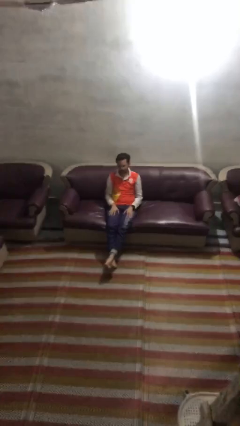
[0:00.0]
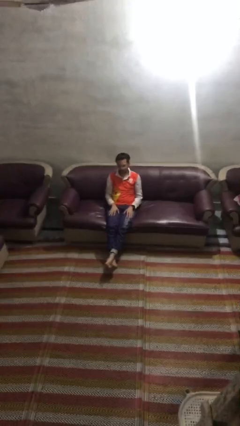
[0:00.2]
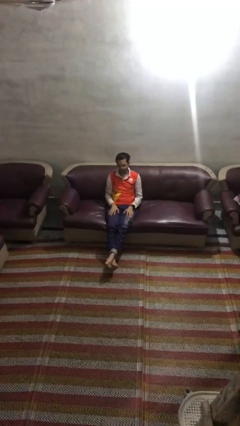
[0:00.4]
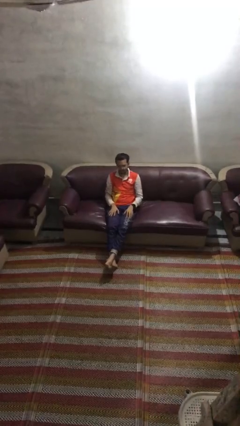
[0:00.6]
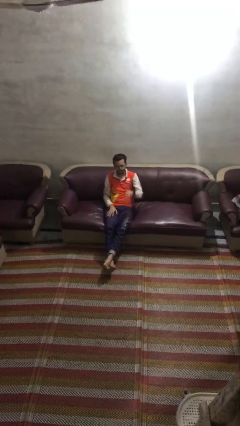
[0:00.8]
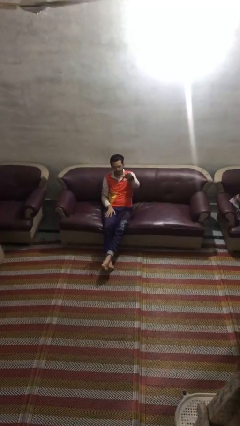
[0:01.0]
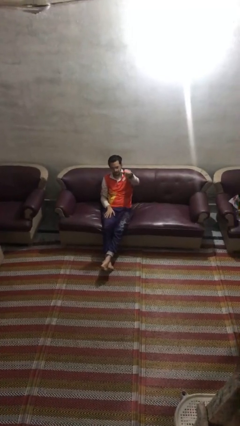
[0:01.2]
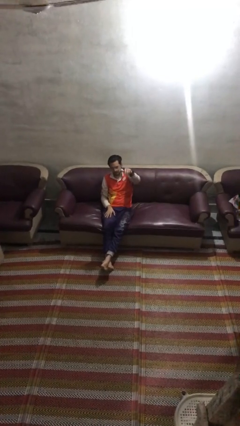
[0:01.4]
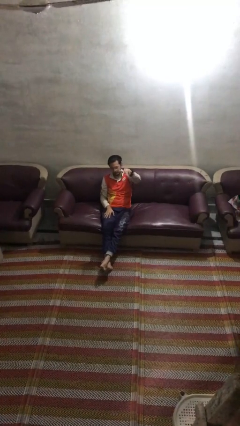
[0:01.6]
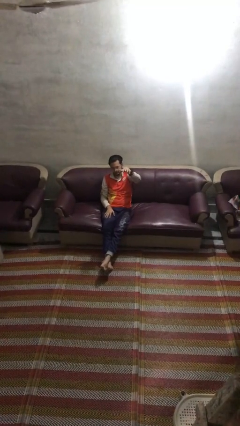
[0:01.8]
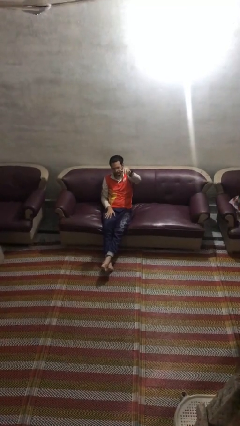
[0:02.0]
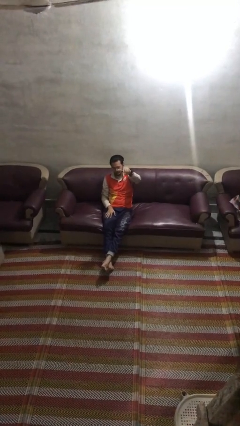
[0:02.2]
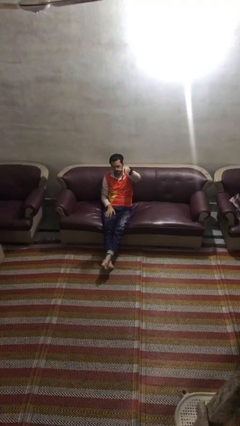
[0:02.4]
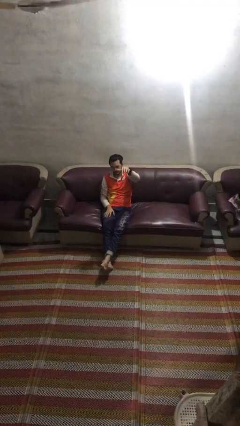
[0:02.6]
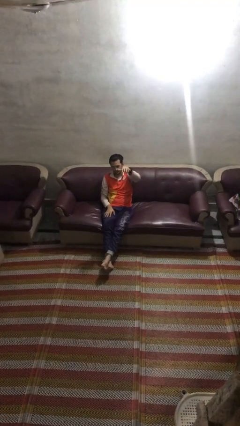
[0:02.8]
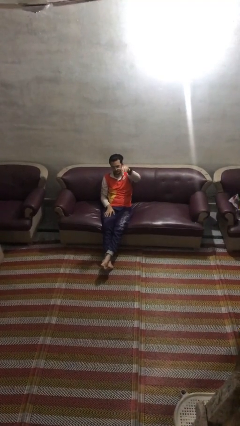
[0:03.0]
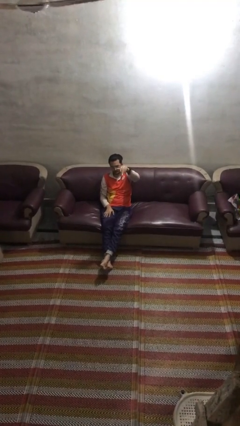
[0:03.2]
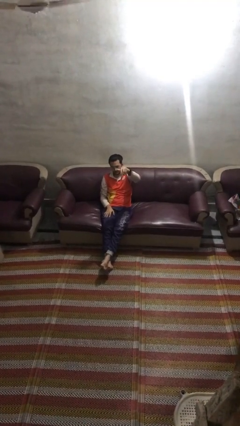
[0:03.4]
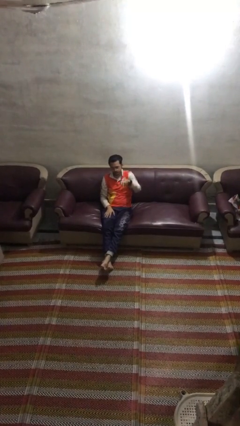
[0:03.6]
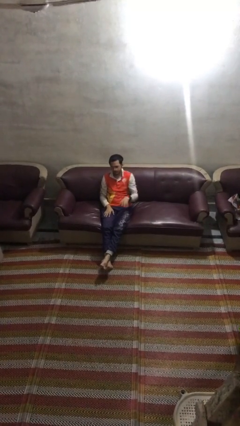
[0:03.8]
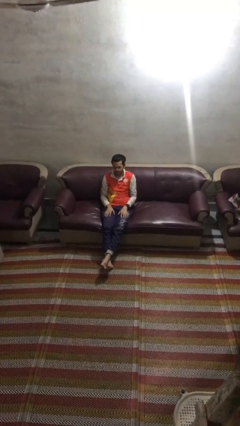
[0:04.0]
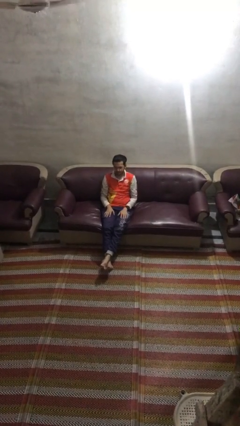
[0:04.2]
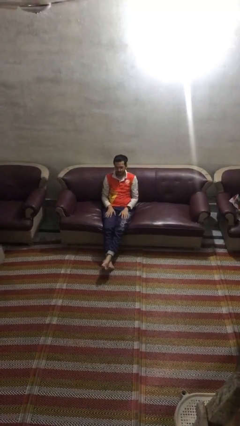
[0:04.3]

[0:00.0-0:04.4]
person gestures come here

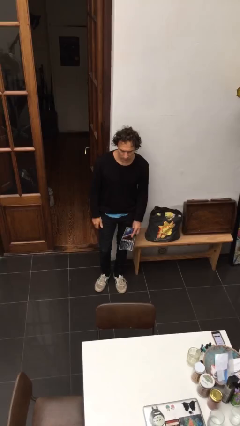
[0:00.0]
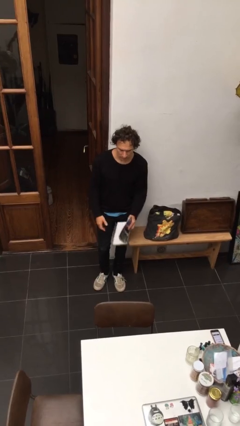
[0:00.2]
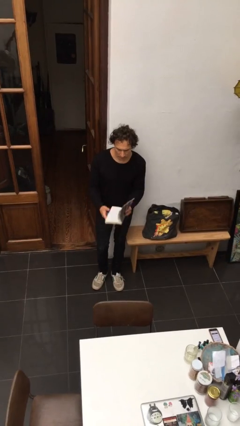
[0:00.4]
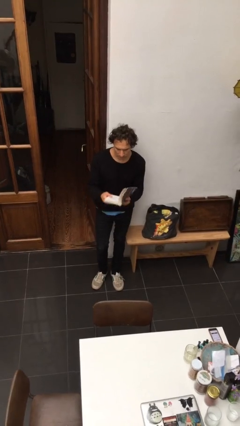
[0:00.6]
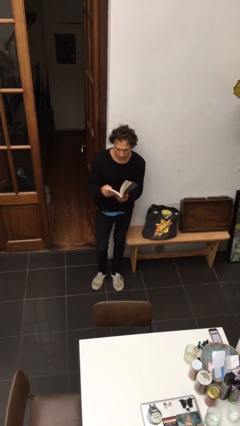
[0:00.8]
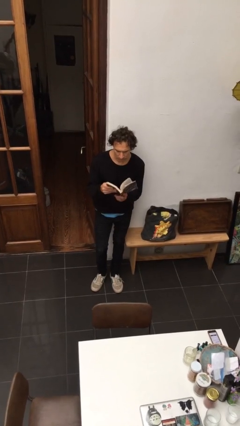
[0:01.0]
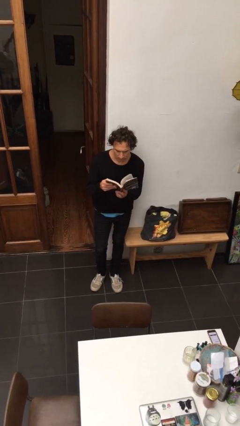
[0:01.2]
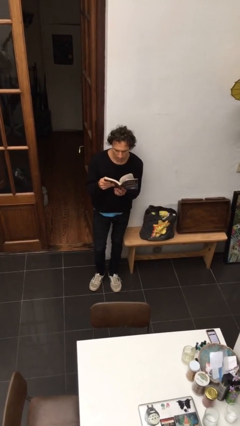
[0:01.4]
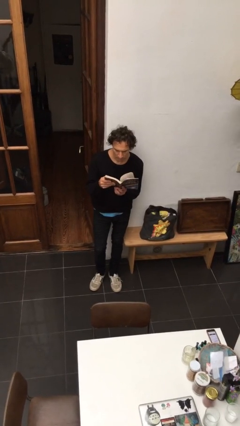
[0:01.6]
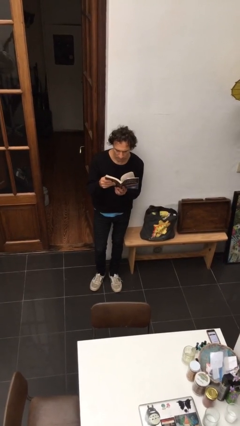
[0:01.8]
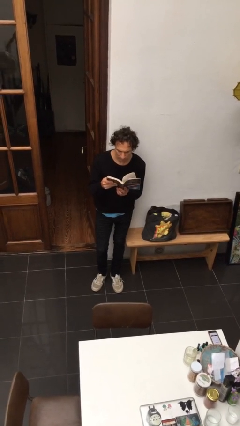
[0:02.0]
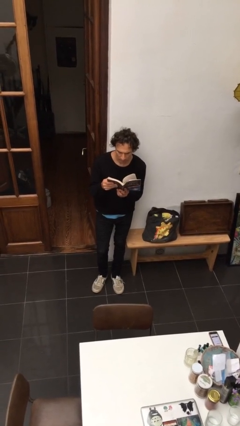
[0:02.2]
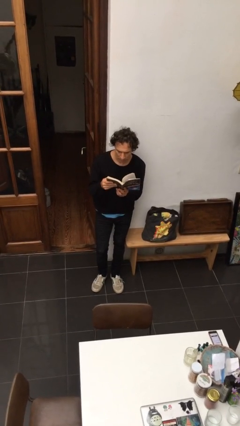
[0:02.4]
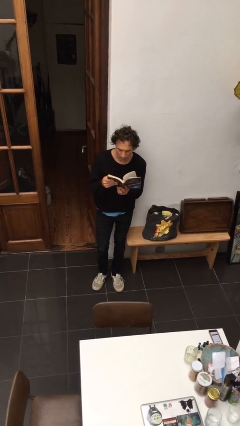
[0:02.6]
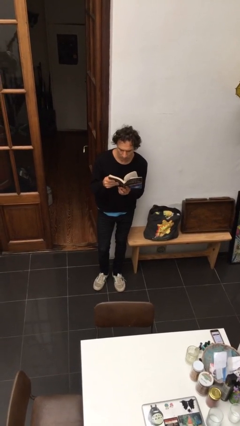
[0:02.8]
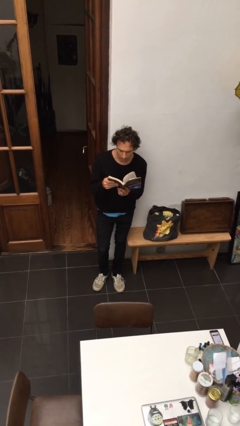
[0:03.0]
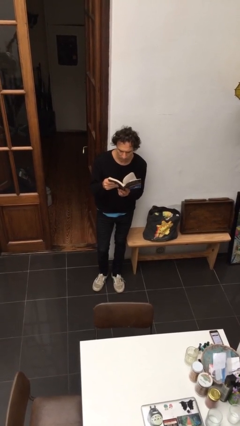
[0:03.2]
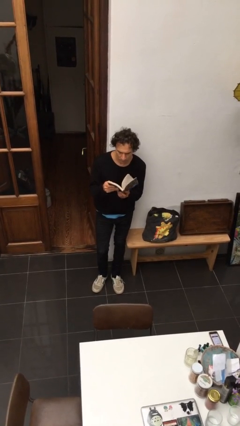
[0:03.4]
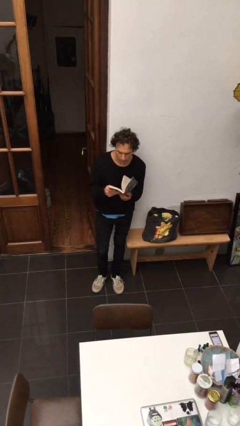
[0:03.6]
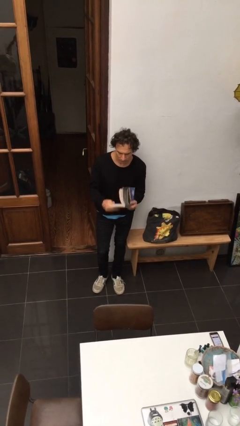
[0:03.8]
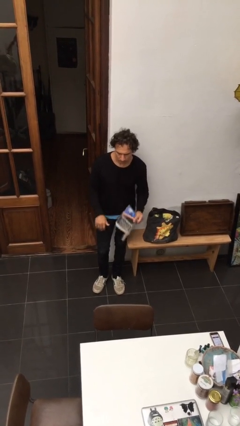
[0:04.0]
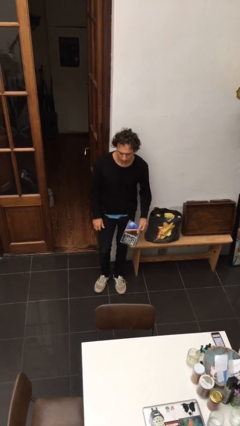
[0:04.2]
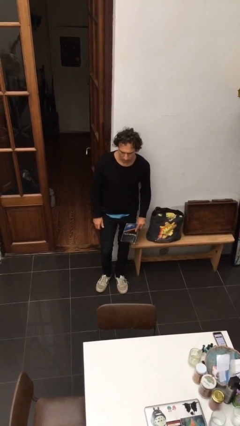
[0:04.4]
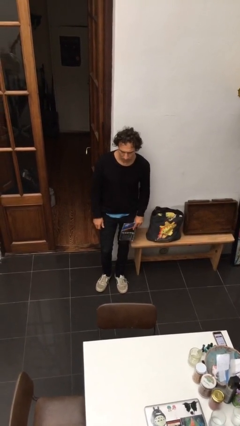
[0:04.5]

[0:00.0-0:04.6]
person reads document

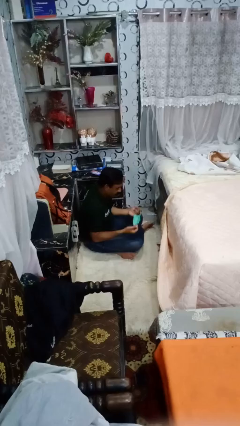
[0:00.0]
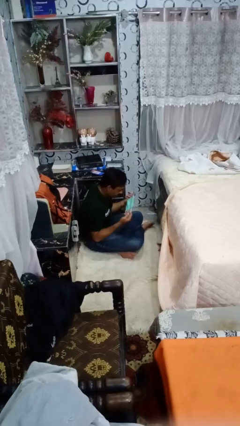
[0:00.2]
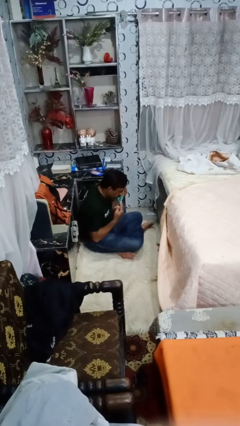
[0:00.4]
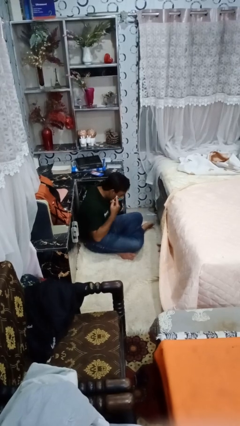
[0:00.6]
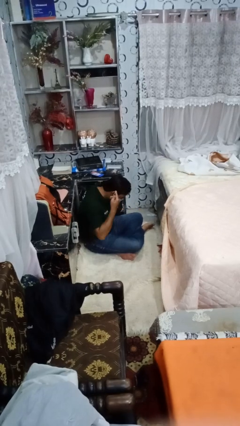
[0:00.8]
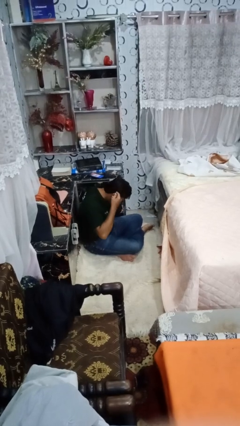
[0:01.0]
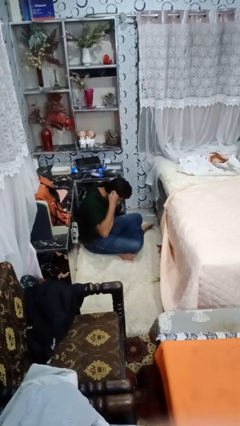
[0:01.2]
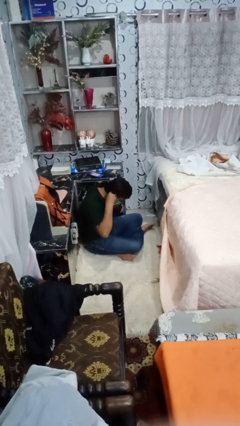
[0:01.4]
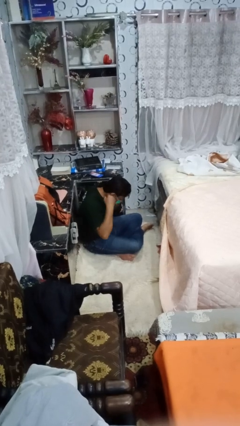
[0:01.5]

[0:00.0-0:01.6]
person puts on facemask

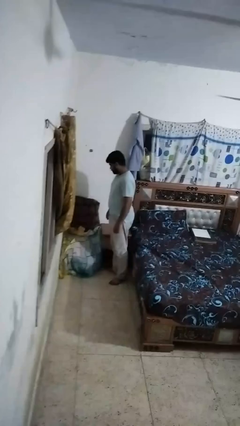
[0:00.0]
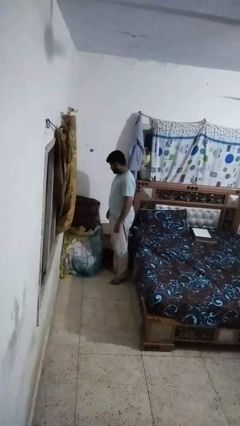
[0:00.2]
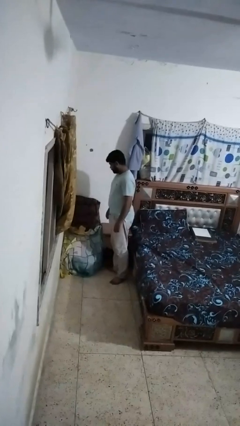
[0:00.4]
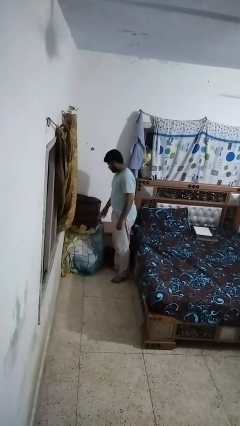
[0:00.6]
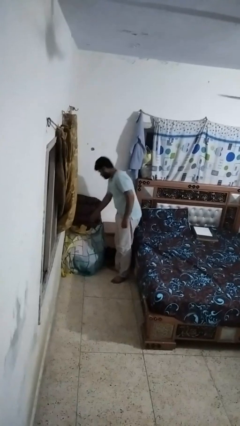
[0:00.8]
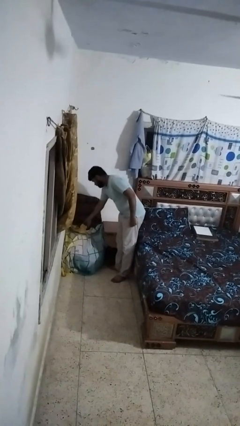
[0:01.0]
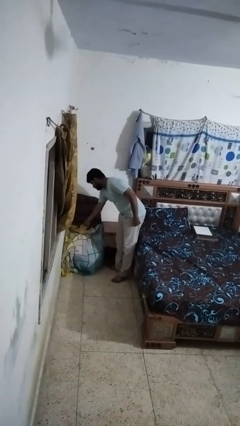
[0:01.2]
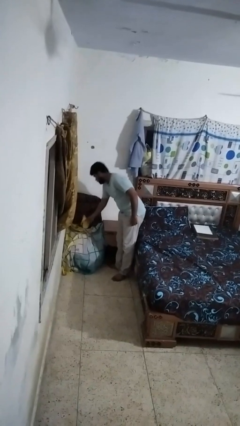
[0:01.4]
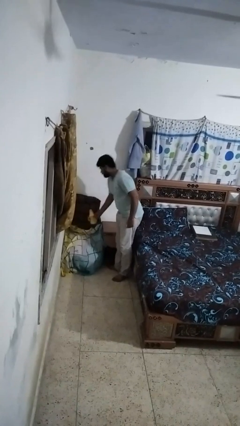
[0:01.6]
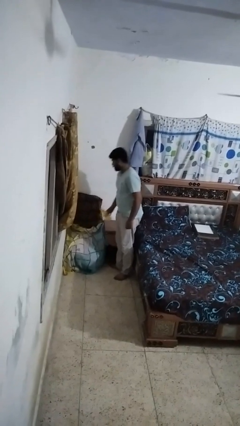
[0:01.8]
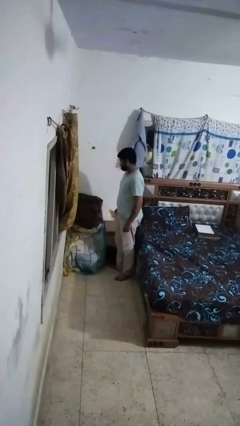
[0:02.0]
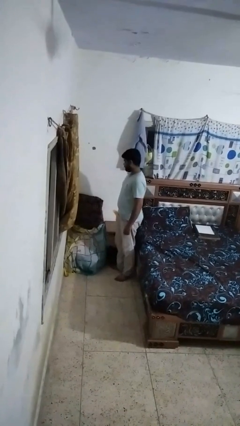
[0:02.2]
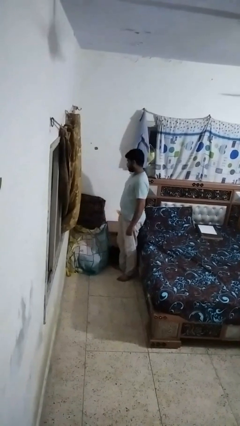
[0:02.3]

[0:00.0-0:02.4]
person picks up object from couch

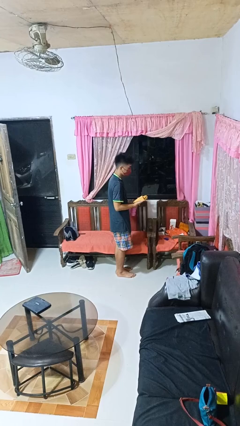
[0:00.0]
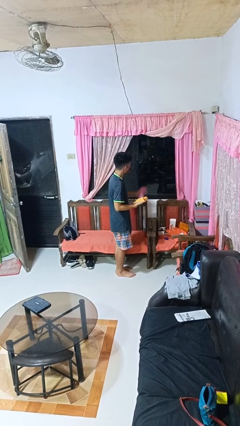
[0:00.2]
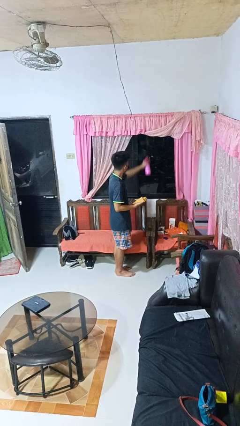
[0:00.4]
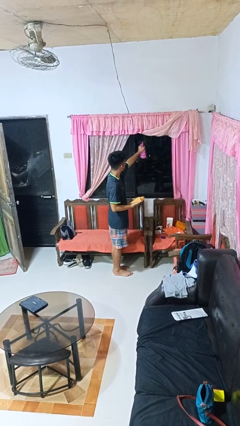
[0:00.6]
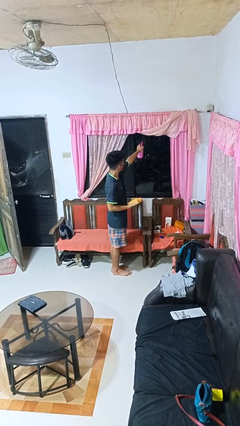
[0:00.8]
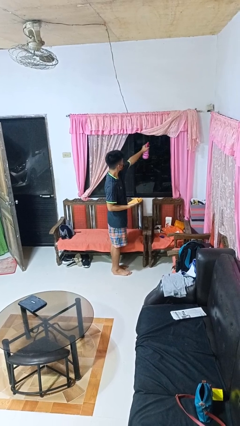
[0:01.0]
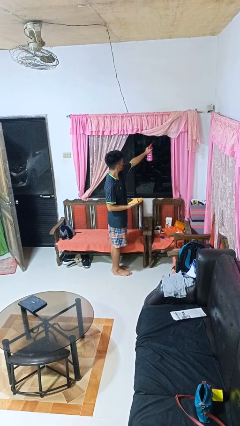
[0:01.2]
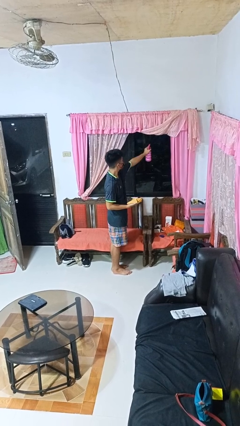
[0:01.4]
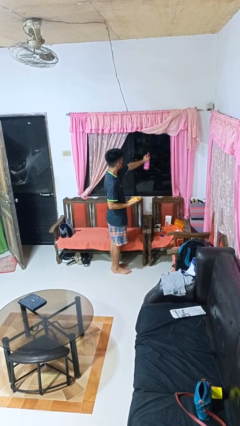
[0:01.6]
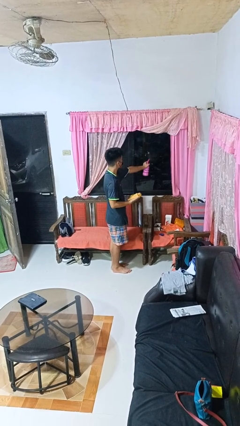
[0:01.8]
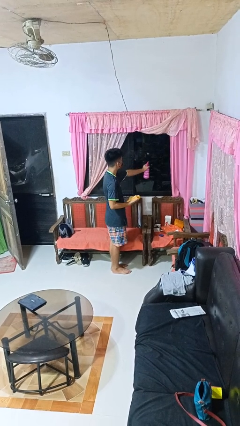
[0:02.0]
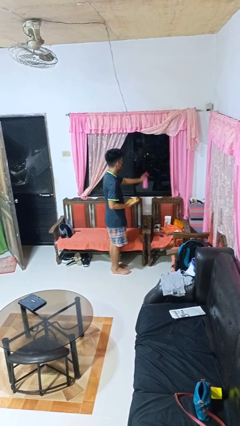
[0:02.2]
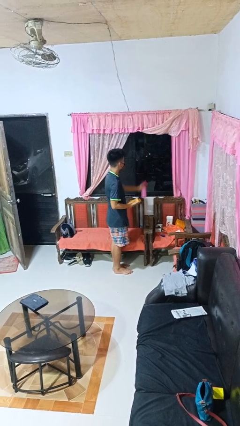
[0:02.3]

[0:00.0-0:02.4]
person sprays from bottle

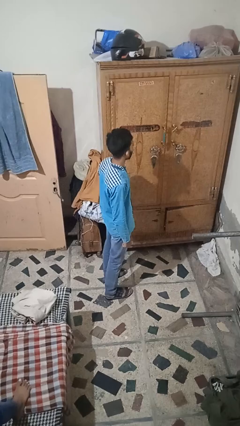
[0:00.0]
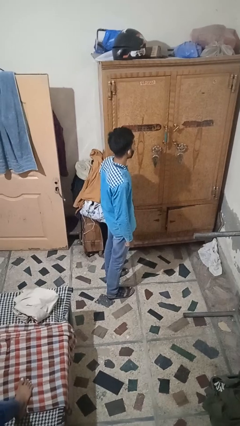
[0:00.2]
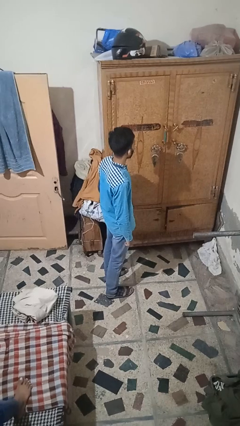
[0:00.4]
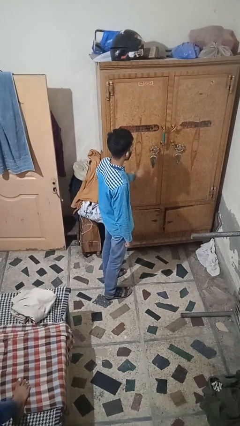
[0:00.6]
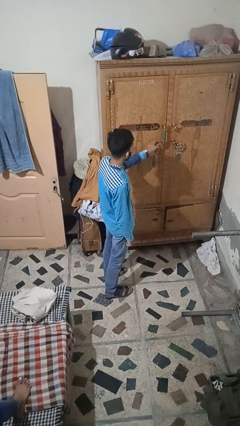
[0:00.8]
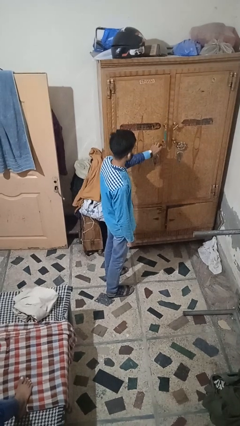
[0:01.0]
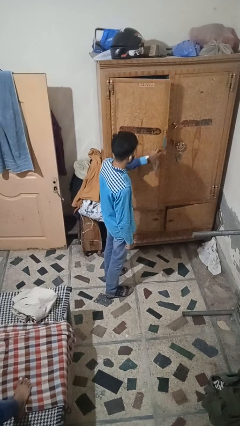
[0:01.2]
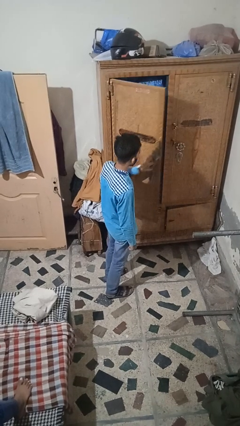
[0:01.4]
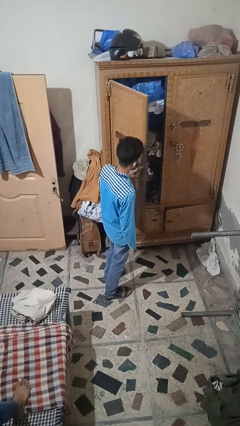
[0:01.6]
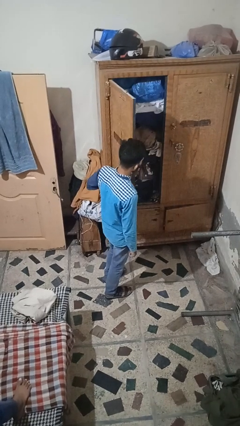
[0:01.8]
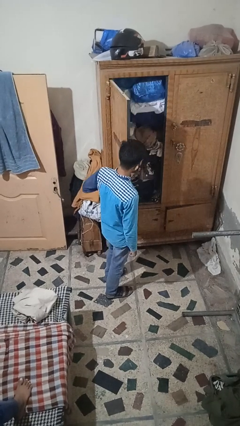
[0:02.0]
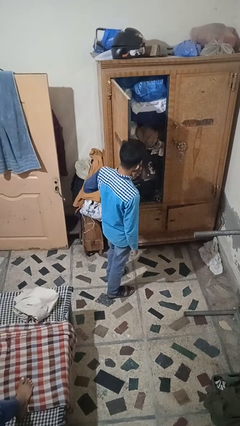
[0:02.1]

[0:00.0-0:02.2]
person opens closet door
